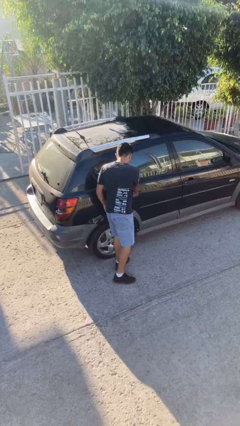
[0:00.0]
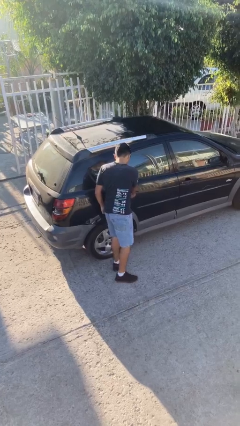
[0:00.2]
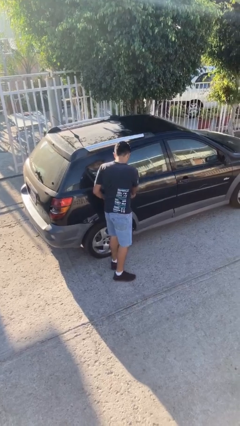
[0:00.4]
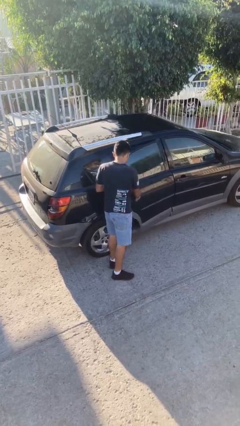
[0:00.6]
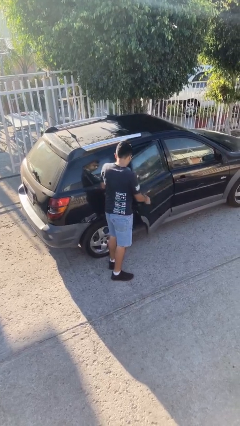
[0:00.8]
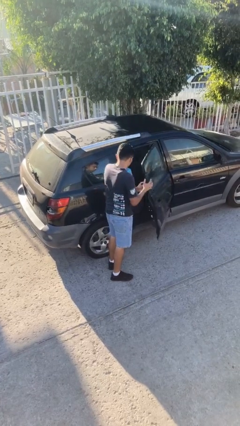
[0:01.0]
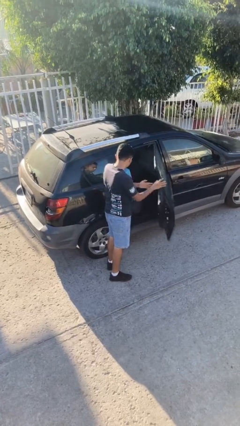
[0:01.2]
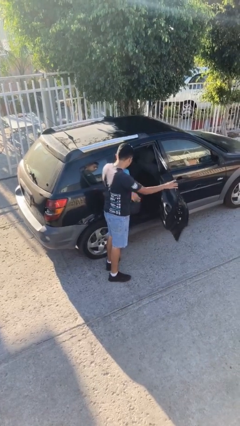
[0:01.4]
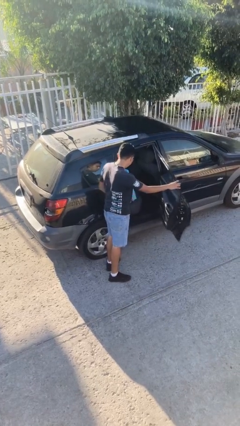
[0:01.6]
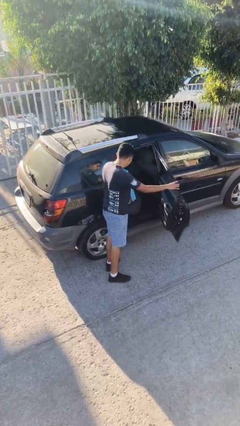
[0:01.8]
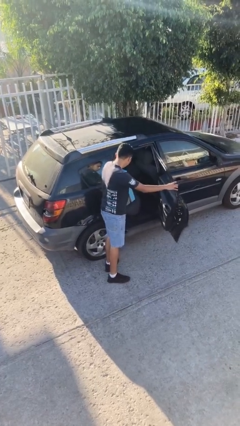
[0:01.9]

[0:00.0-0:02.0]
person opens car door

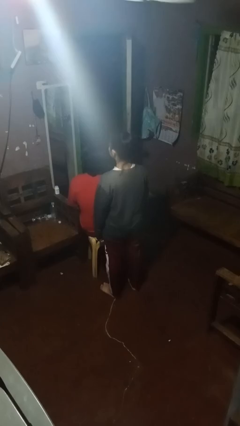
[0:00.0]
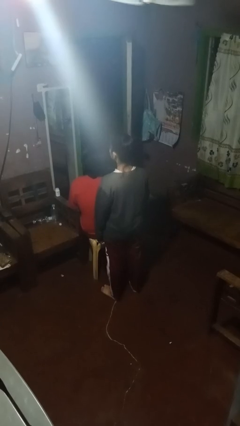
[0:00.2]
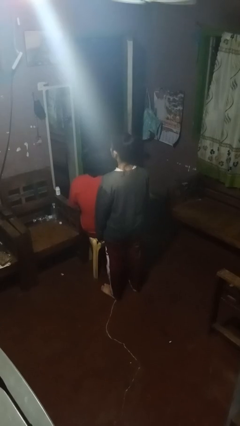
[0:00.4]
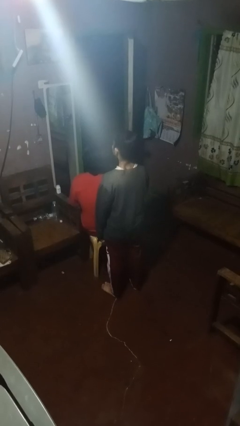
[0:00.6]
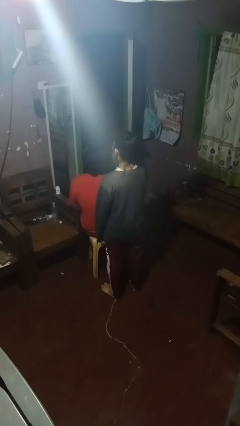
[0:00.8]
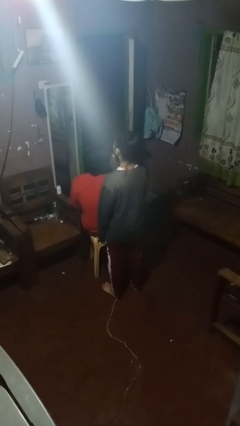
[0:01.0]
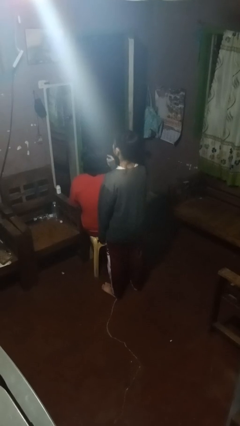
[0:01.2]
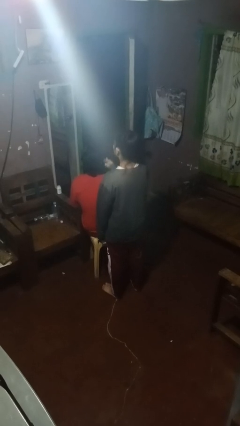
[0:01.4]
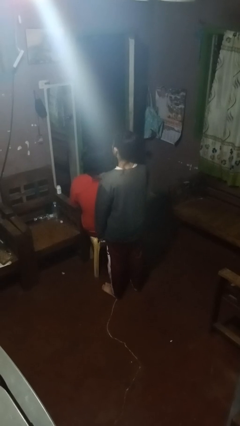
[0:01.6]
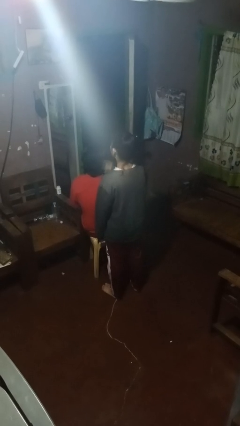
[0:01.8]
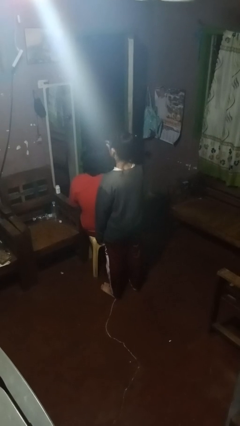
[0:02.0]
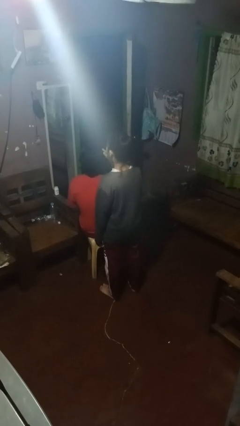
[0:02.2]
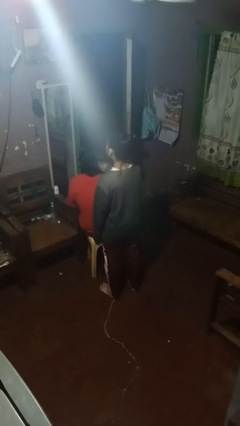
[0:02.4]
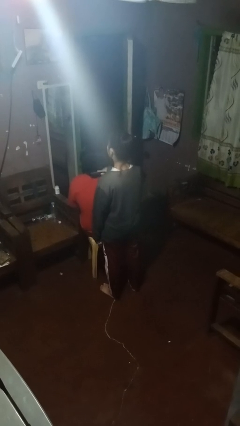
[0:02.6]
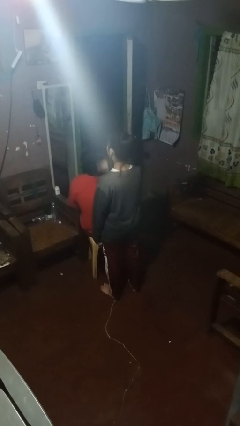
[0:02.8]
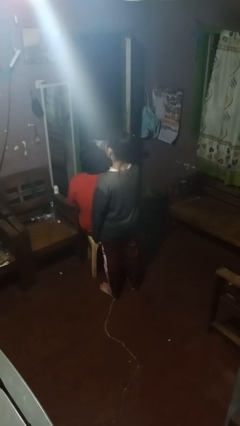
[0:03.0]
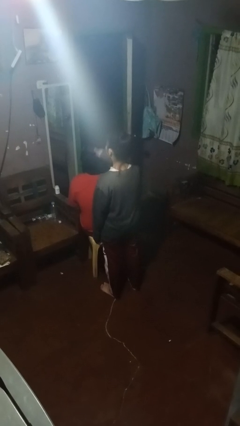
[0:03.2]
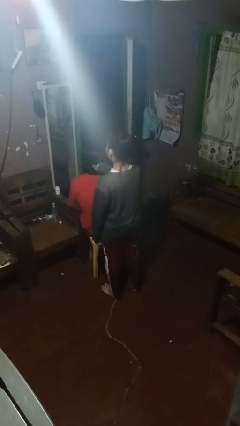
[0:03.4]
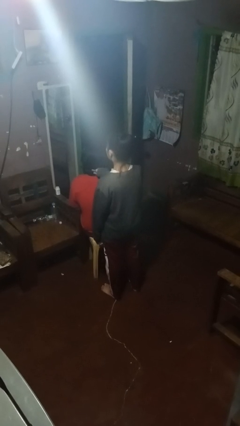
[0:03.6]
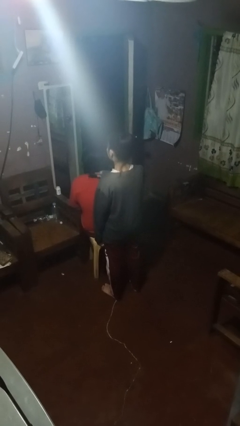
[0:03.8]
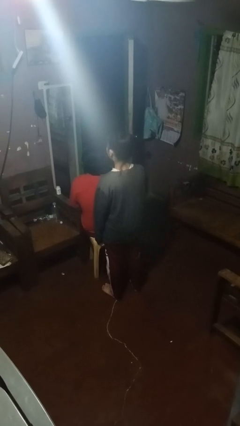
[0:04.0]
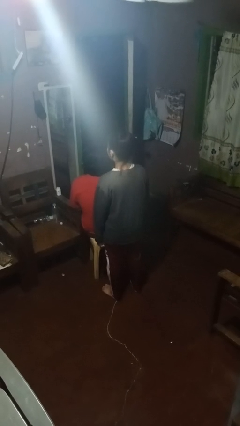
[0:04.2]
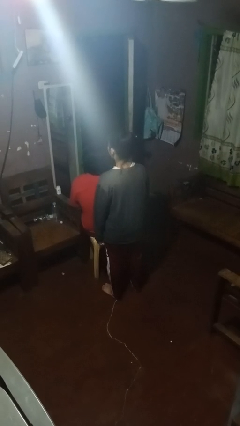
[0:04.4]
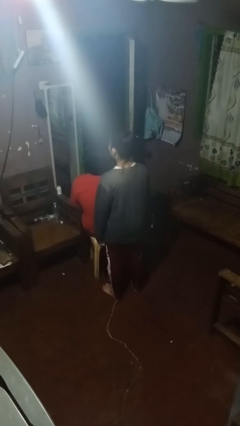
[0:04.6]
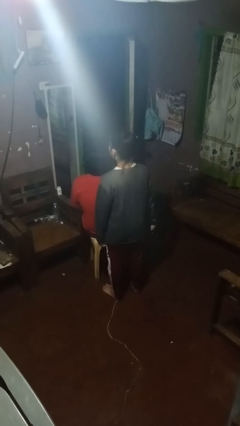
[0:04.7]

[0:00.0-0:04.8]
person brushes hair of person

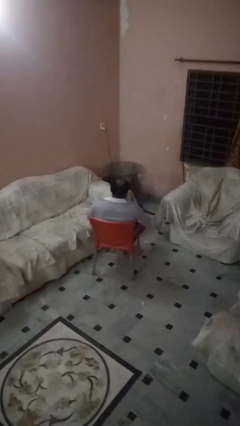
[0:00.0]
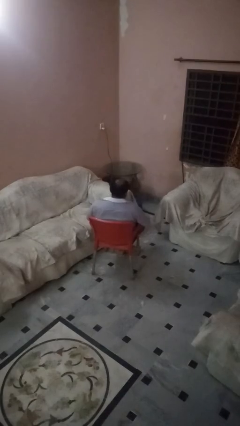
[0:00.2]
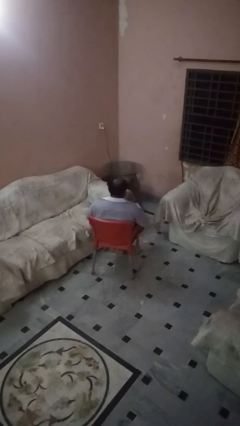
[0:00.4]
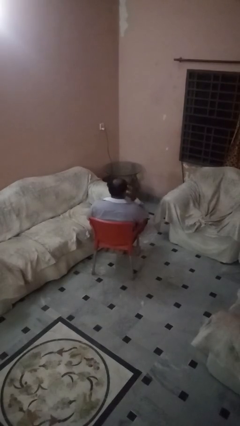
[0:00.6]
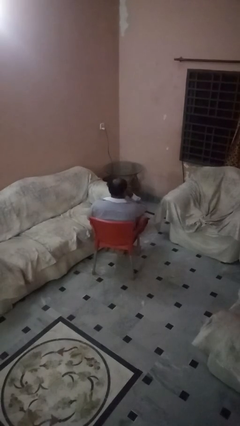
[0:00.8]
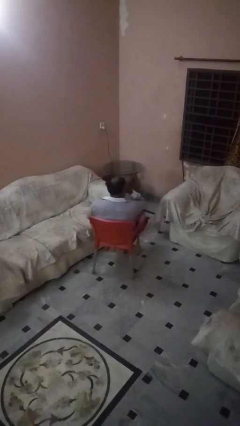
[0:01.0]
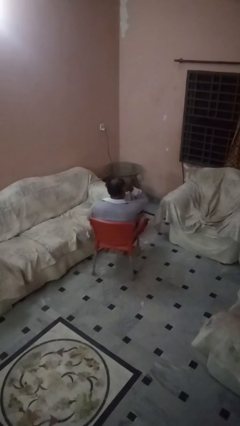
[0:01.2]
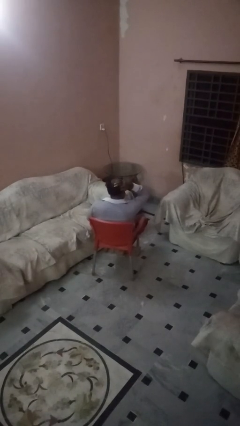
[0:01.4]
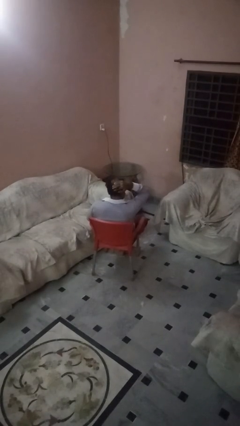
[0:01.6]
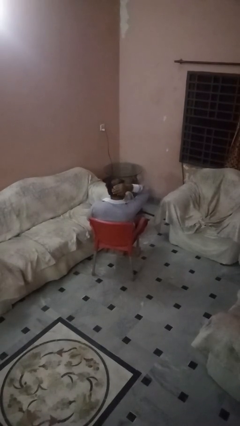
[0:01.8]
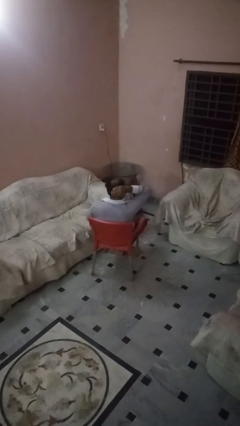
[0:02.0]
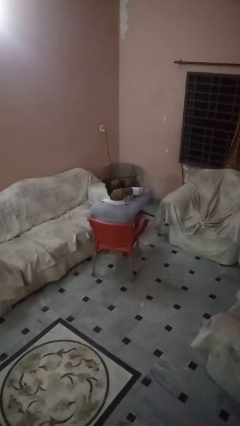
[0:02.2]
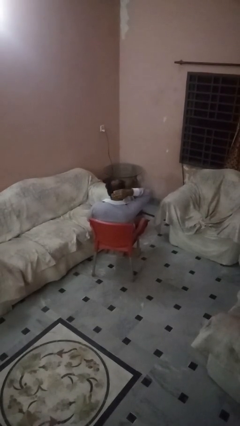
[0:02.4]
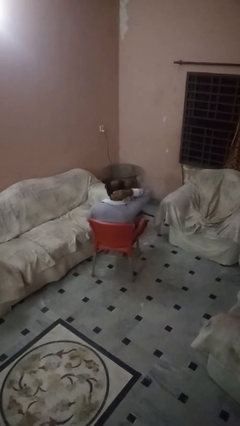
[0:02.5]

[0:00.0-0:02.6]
person strokes hair

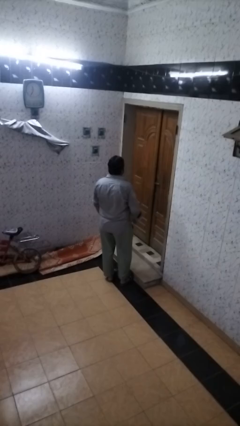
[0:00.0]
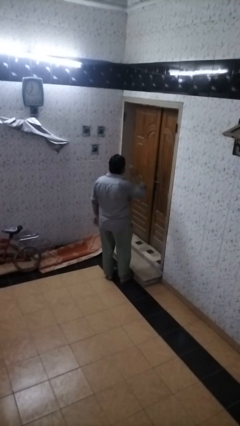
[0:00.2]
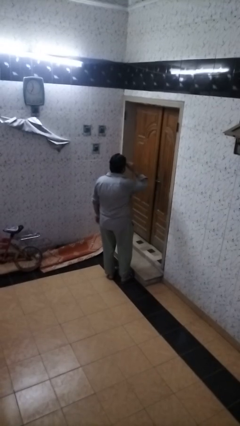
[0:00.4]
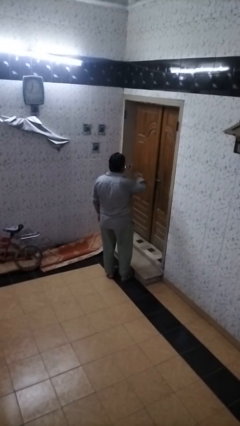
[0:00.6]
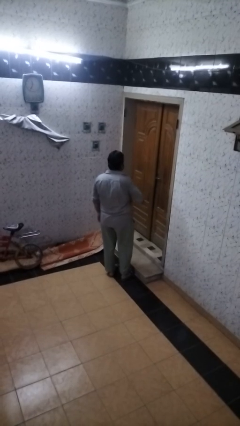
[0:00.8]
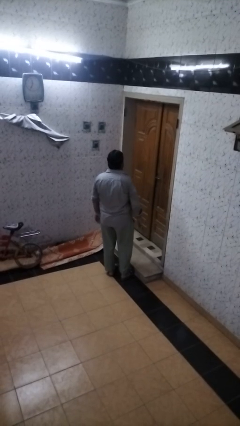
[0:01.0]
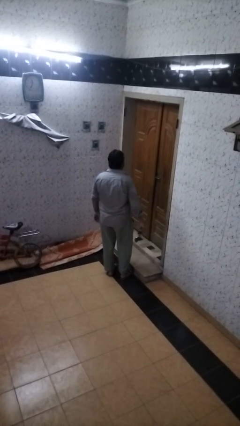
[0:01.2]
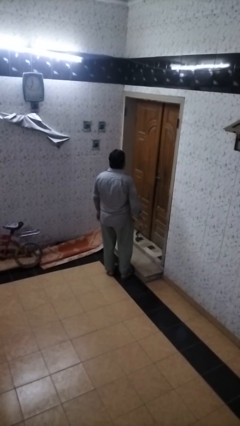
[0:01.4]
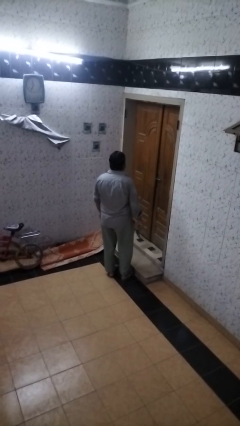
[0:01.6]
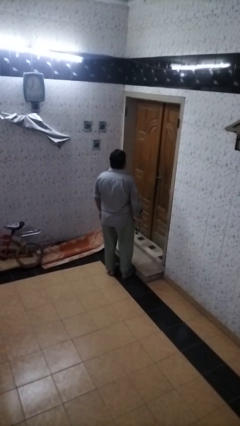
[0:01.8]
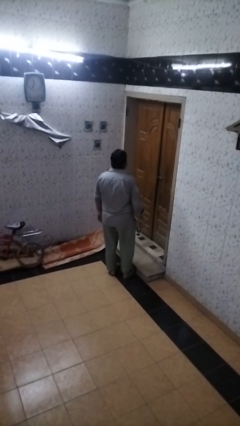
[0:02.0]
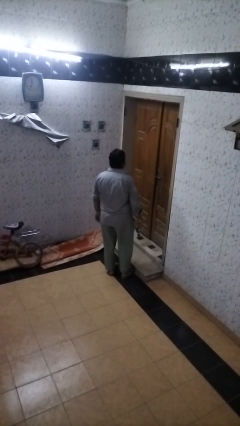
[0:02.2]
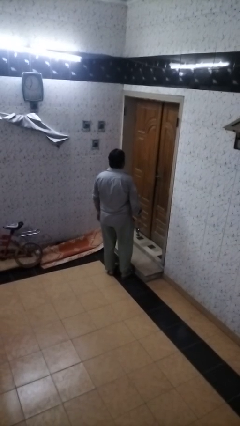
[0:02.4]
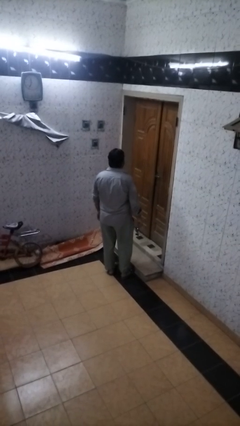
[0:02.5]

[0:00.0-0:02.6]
person takes off sunglasses

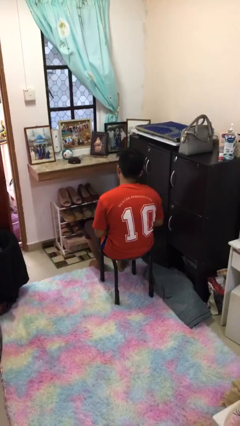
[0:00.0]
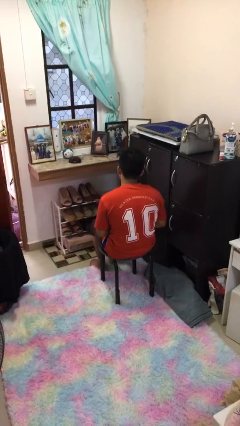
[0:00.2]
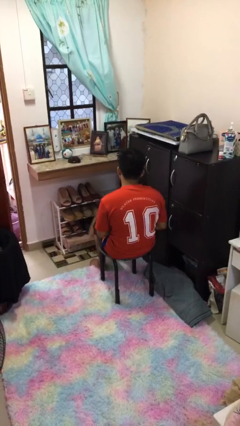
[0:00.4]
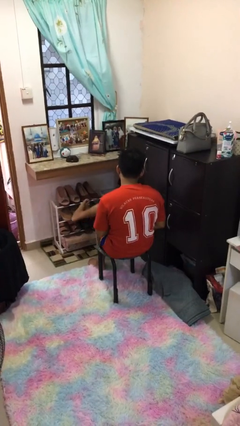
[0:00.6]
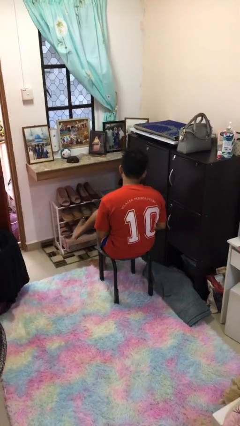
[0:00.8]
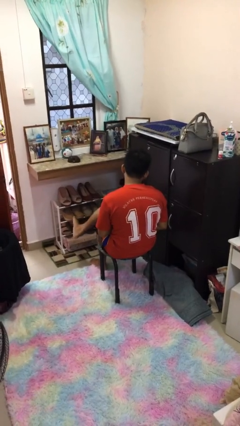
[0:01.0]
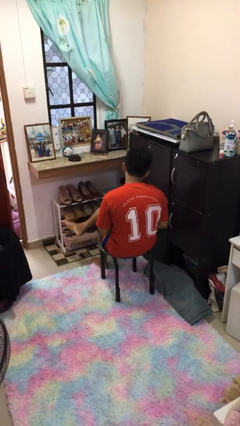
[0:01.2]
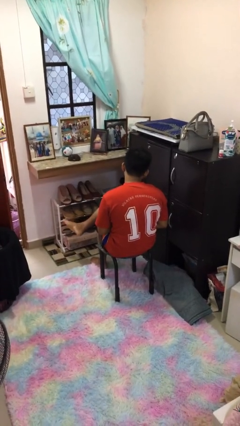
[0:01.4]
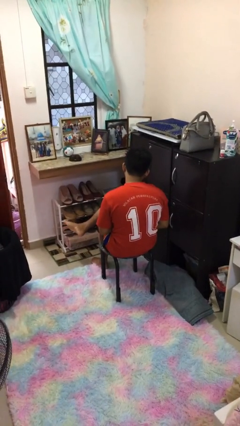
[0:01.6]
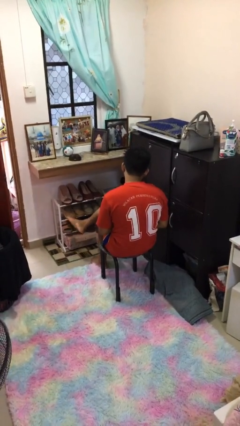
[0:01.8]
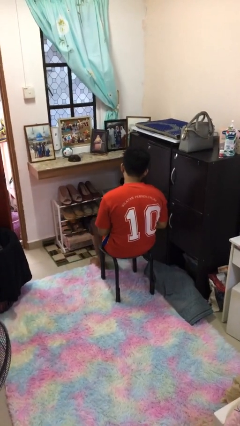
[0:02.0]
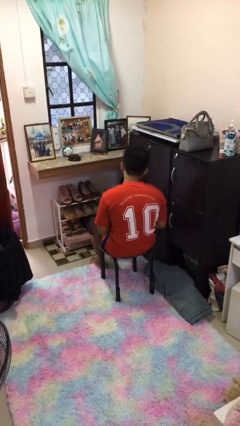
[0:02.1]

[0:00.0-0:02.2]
person crosses legs

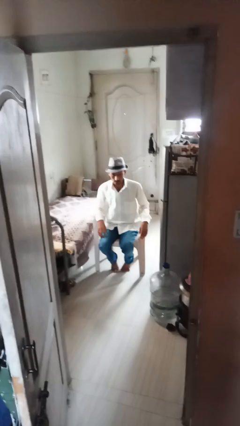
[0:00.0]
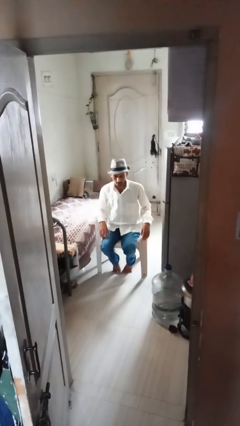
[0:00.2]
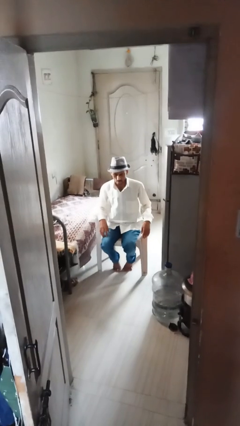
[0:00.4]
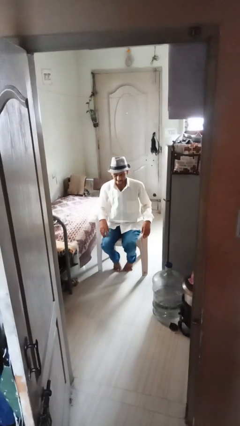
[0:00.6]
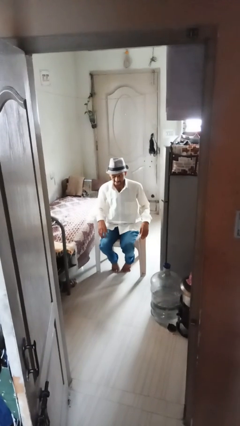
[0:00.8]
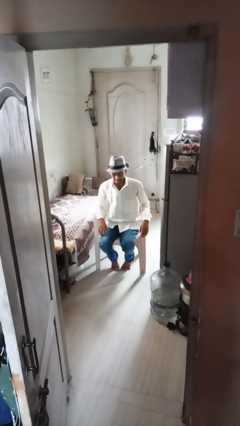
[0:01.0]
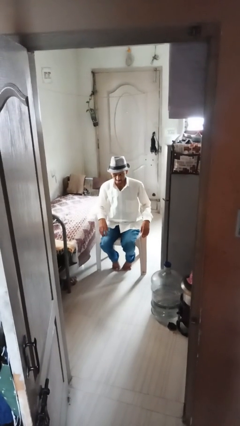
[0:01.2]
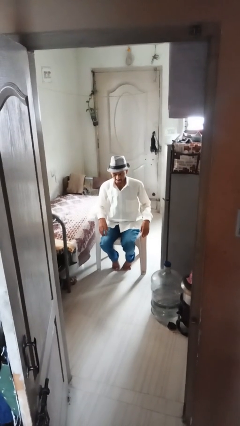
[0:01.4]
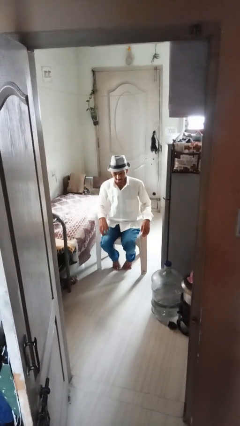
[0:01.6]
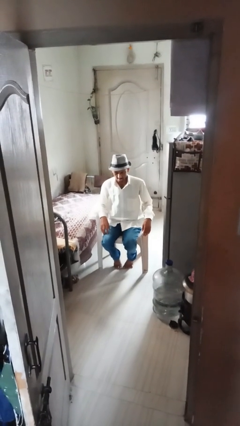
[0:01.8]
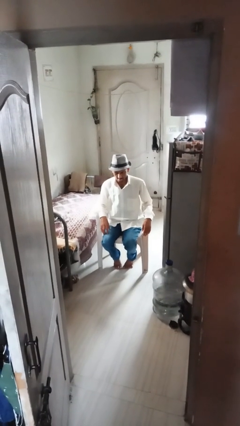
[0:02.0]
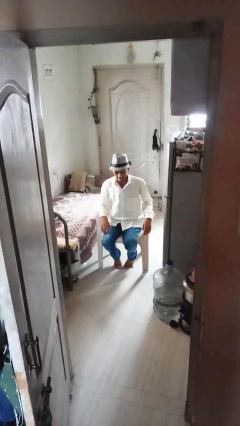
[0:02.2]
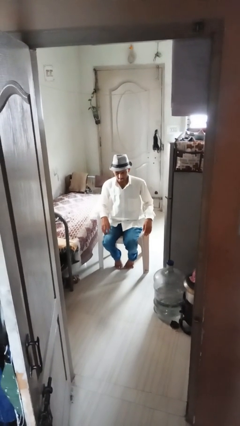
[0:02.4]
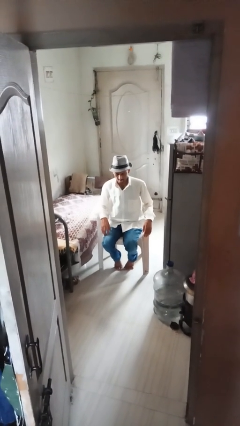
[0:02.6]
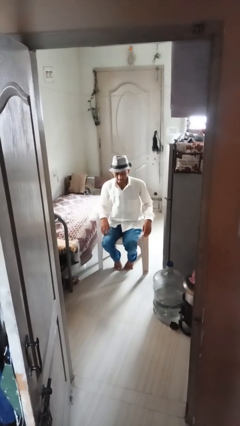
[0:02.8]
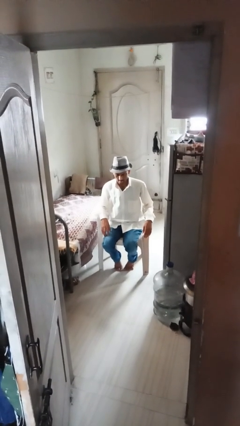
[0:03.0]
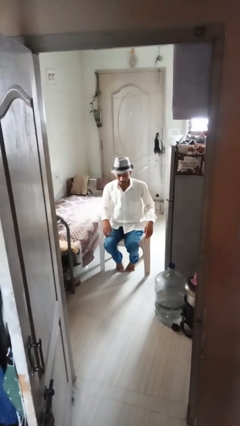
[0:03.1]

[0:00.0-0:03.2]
person sticks out tongue
